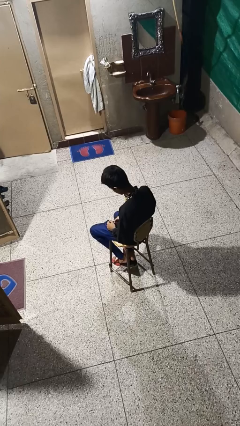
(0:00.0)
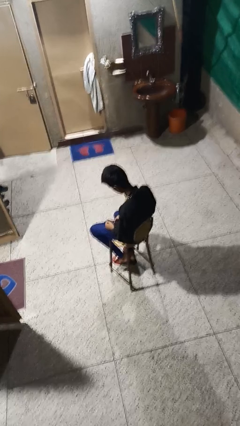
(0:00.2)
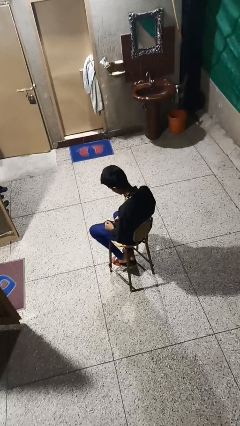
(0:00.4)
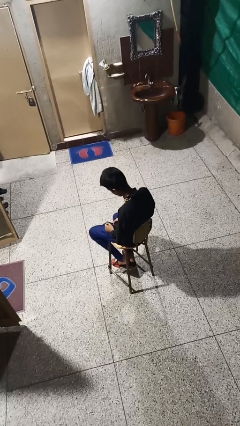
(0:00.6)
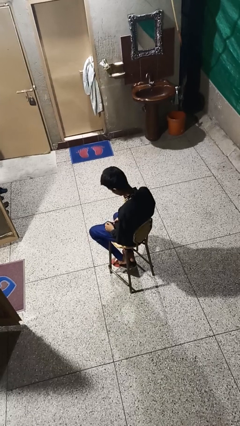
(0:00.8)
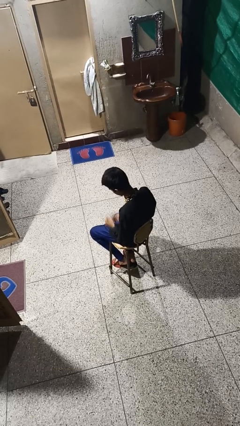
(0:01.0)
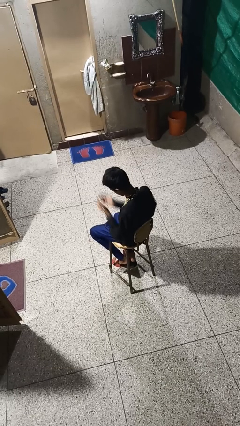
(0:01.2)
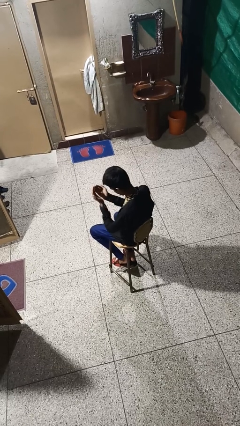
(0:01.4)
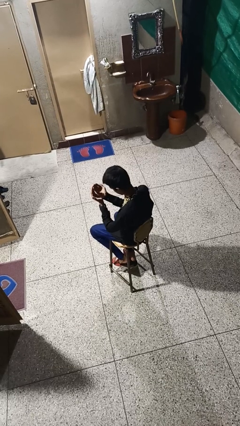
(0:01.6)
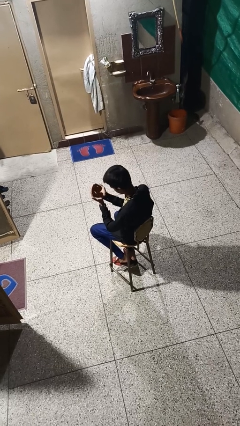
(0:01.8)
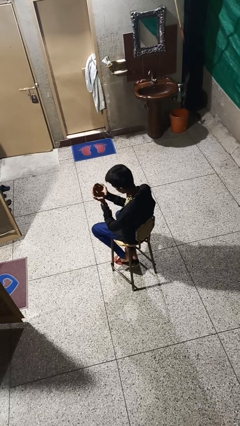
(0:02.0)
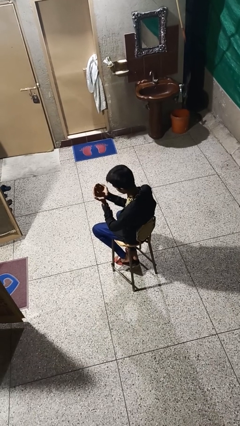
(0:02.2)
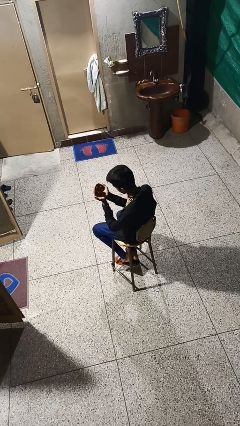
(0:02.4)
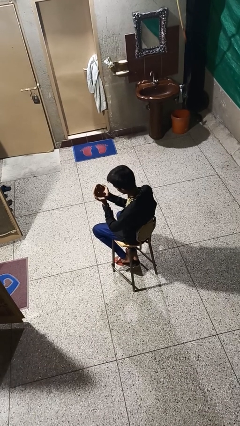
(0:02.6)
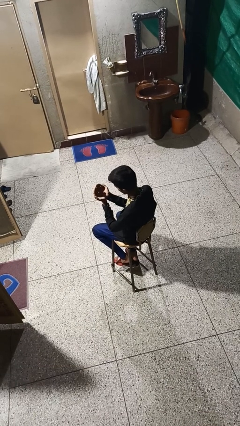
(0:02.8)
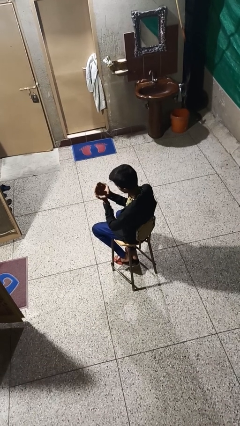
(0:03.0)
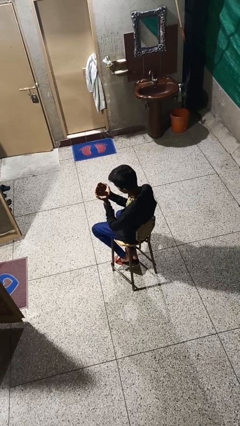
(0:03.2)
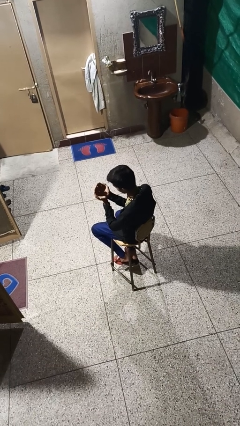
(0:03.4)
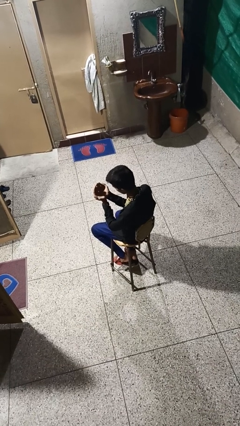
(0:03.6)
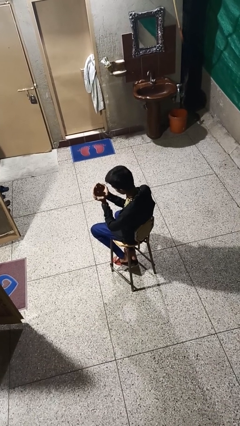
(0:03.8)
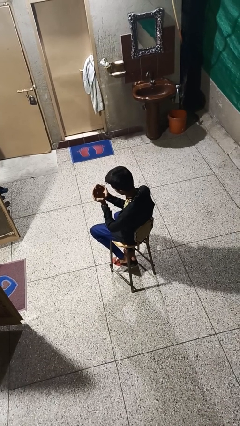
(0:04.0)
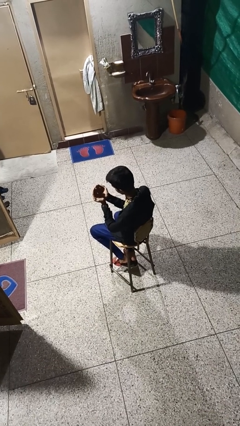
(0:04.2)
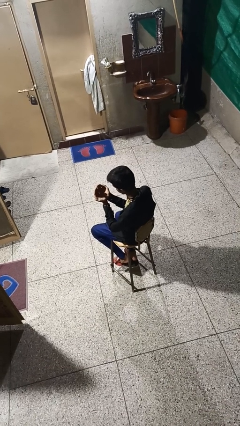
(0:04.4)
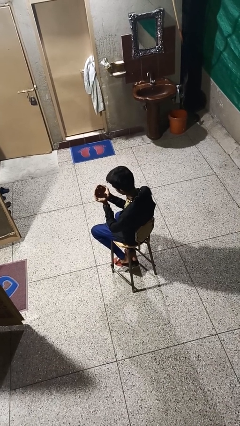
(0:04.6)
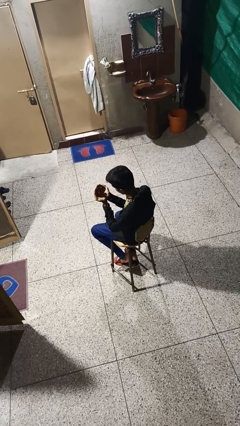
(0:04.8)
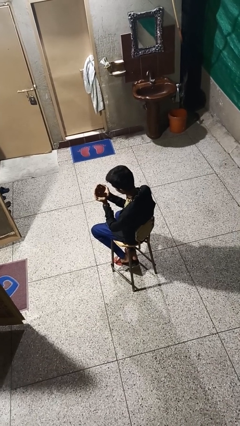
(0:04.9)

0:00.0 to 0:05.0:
person prays

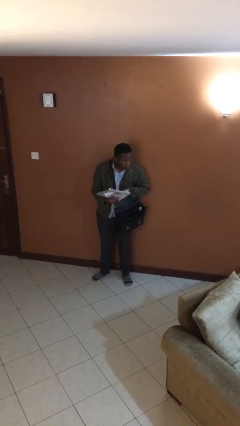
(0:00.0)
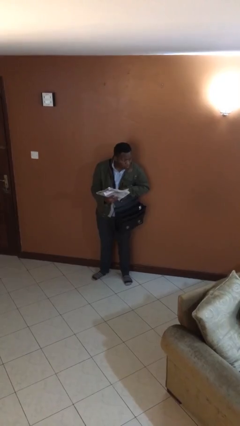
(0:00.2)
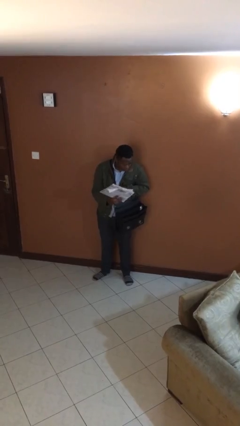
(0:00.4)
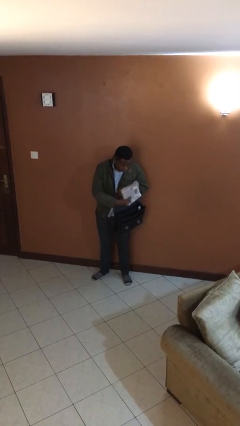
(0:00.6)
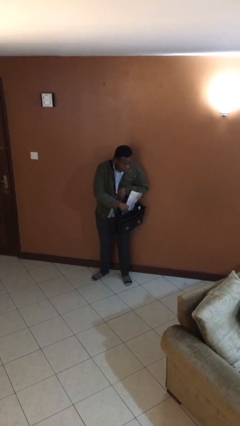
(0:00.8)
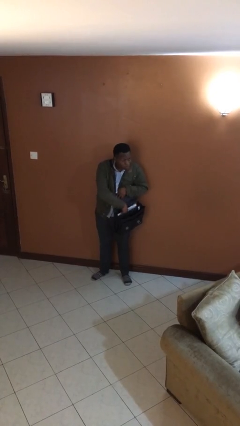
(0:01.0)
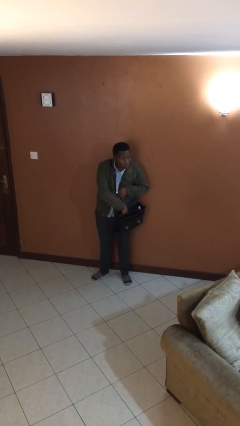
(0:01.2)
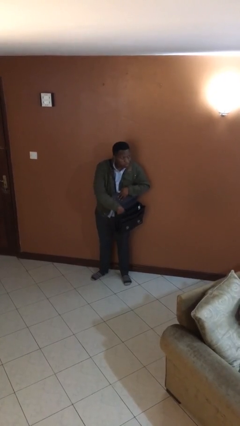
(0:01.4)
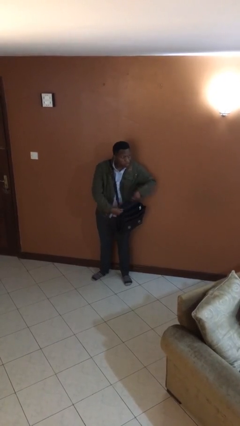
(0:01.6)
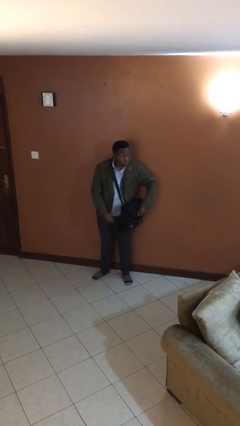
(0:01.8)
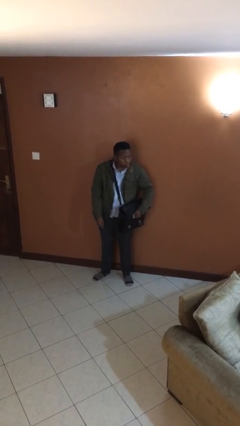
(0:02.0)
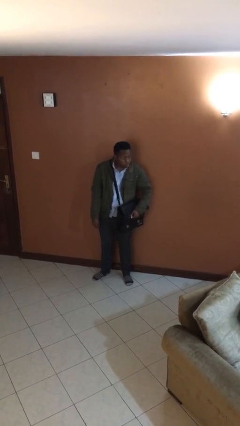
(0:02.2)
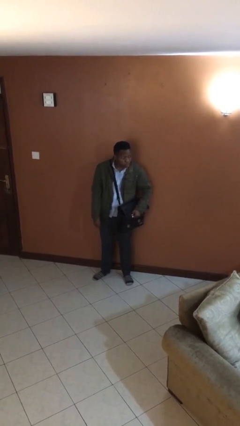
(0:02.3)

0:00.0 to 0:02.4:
person puts object into purse

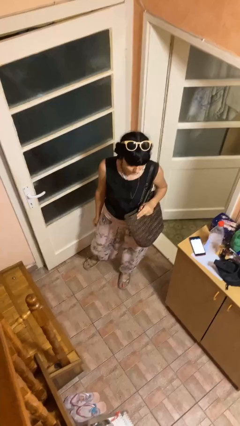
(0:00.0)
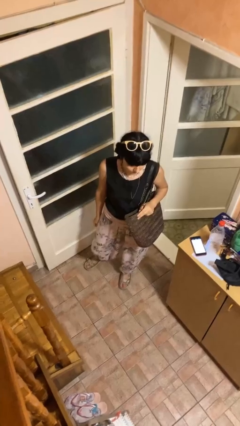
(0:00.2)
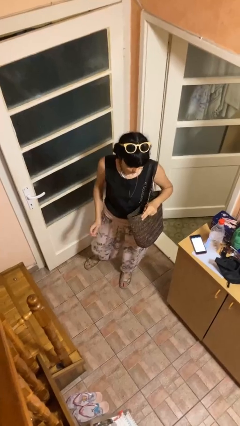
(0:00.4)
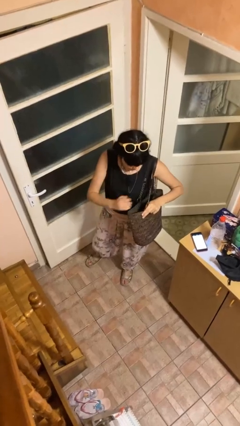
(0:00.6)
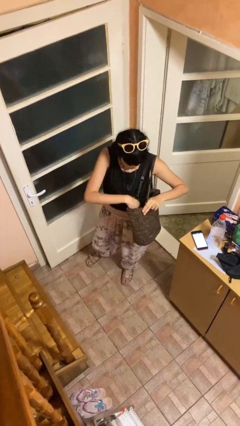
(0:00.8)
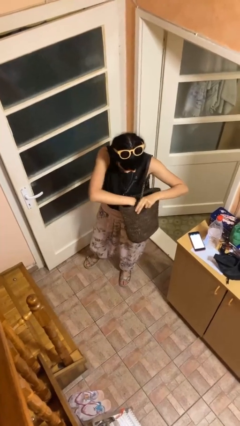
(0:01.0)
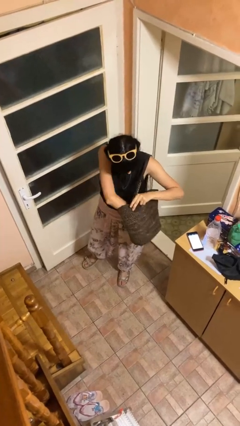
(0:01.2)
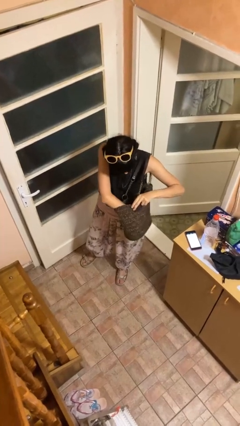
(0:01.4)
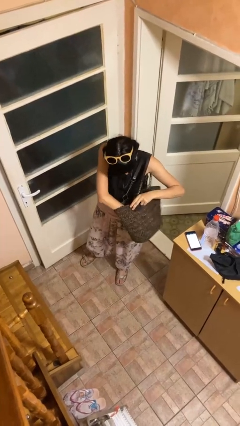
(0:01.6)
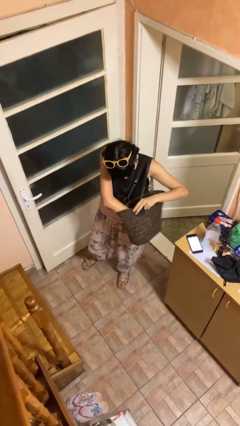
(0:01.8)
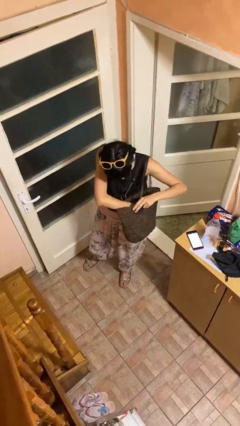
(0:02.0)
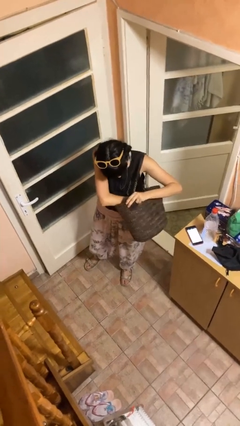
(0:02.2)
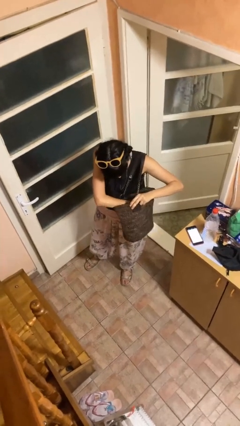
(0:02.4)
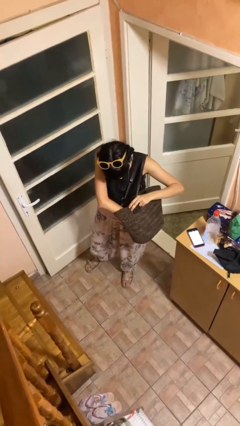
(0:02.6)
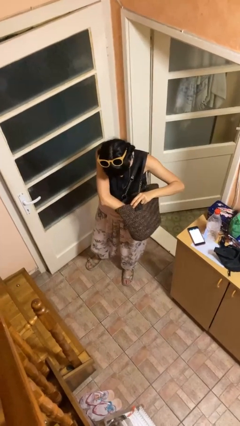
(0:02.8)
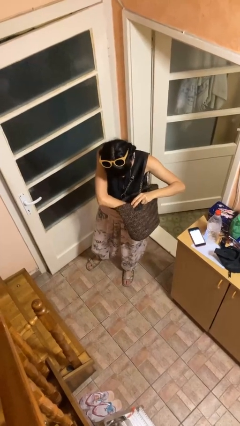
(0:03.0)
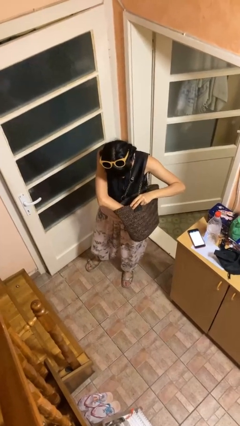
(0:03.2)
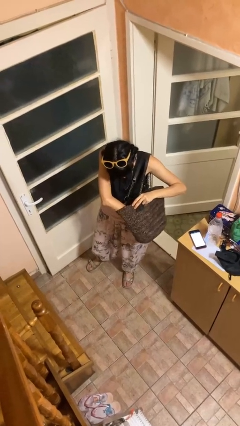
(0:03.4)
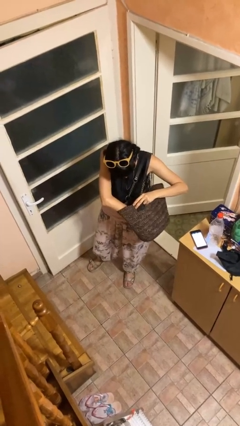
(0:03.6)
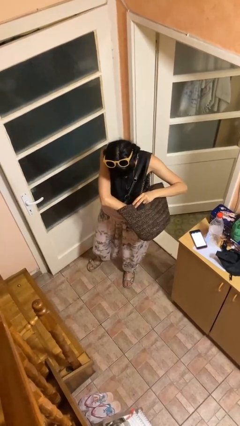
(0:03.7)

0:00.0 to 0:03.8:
person searches in purse

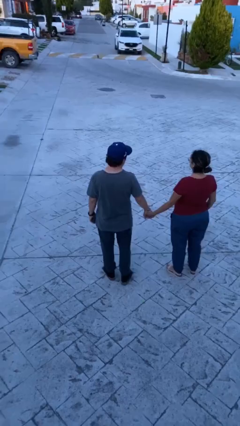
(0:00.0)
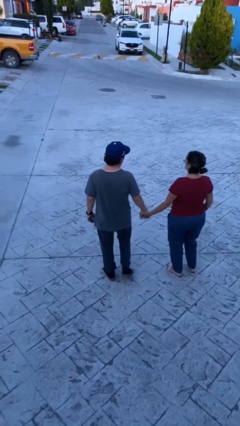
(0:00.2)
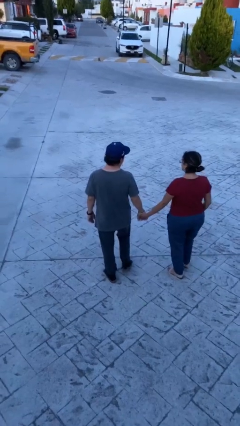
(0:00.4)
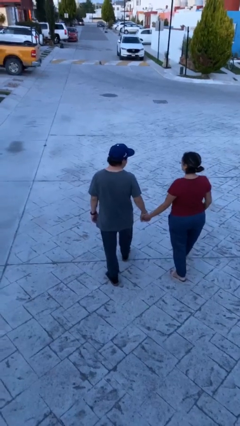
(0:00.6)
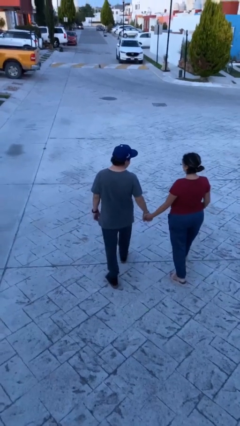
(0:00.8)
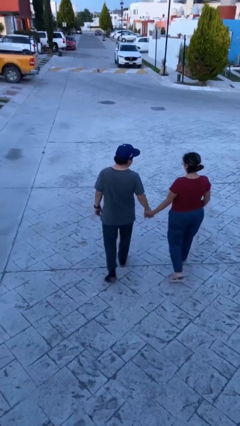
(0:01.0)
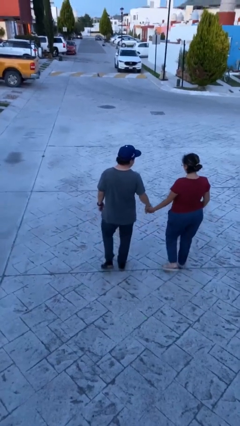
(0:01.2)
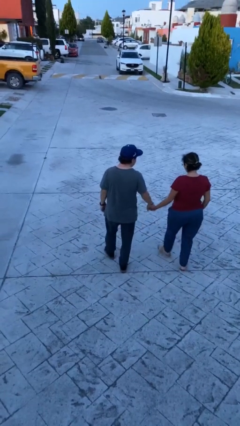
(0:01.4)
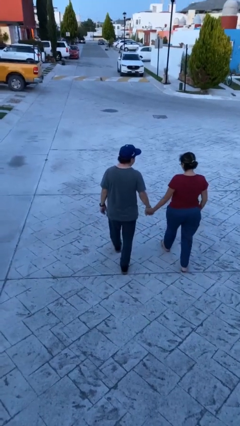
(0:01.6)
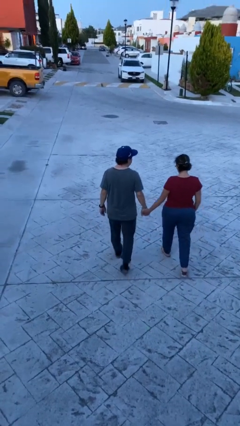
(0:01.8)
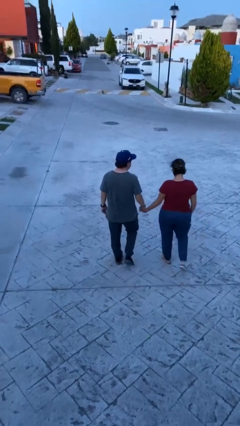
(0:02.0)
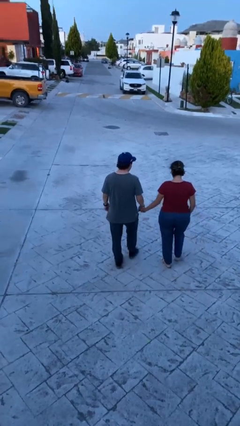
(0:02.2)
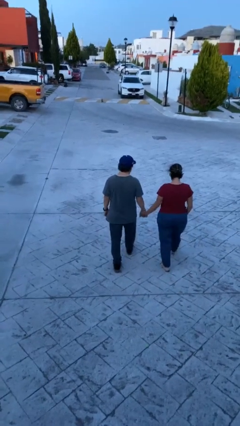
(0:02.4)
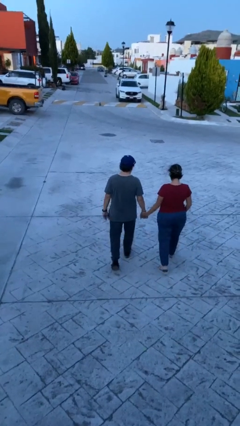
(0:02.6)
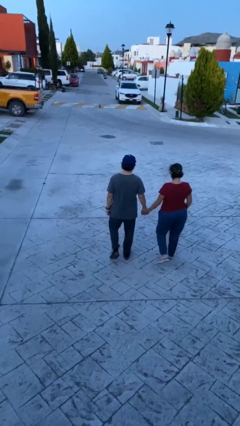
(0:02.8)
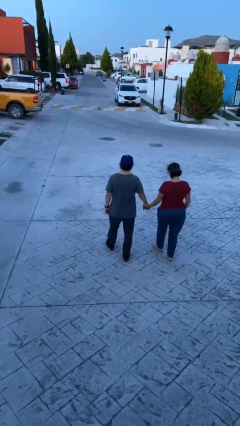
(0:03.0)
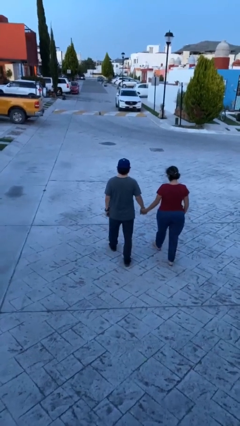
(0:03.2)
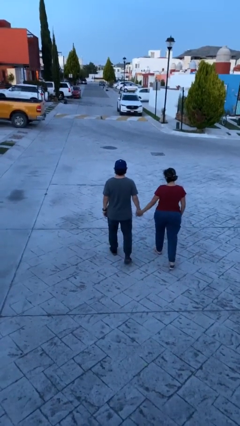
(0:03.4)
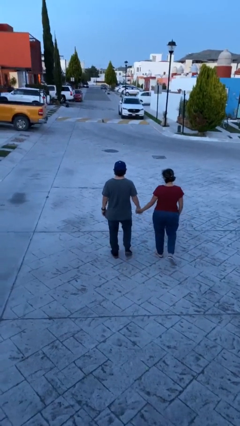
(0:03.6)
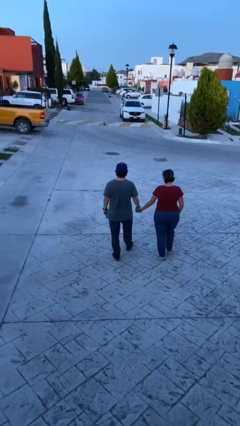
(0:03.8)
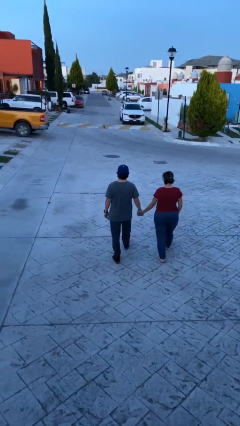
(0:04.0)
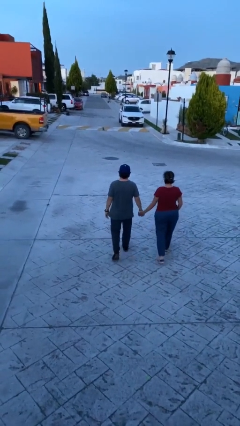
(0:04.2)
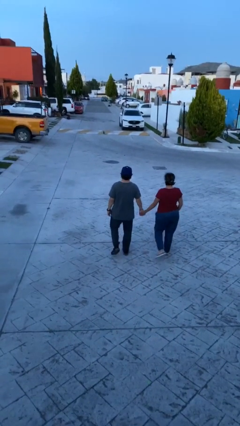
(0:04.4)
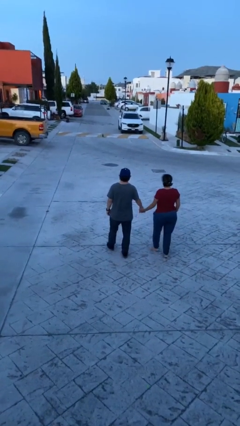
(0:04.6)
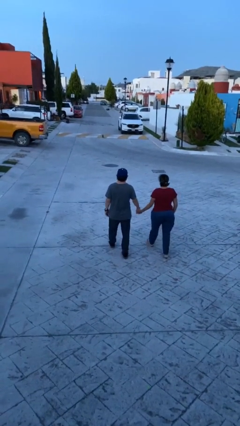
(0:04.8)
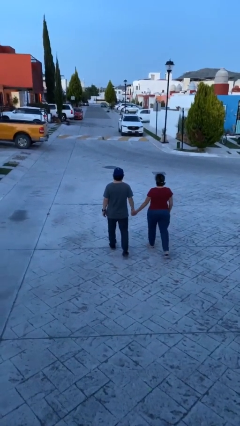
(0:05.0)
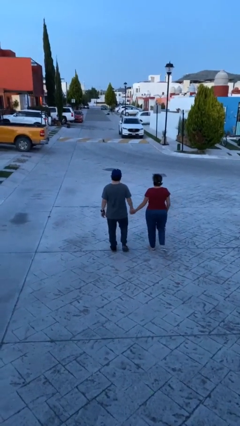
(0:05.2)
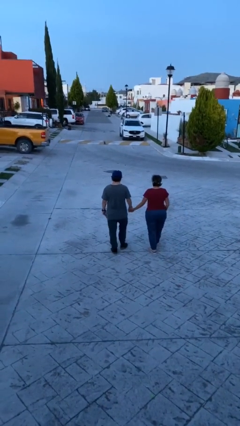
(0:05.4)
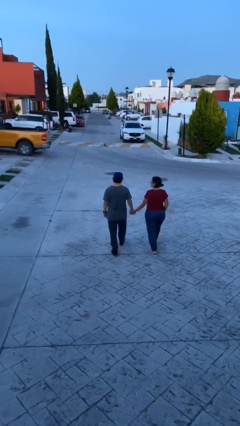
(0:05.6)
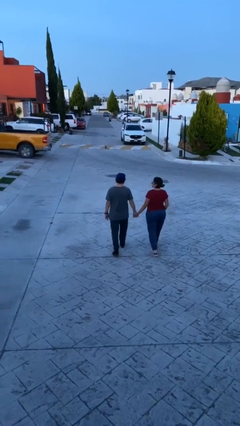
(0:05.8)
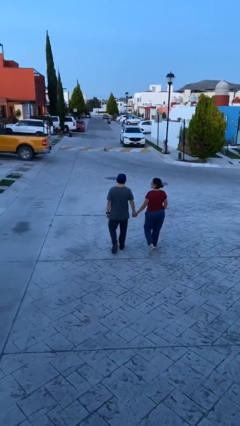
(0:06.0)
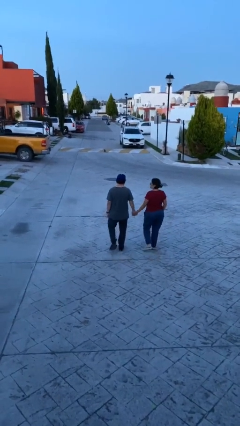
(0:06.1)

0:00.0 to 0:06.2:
person holds hand

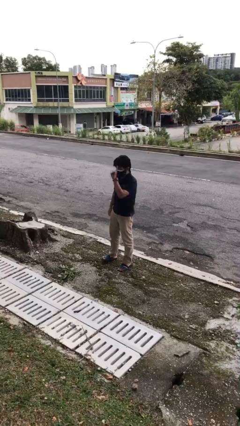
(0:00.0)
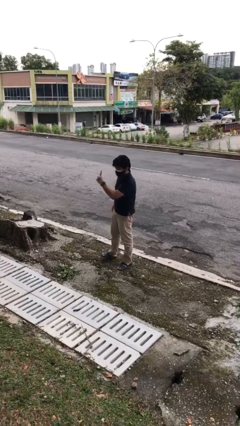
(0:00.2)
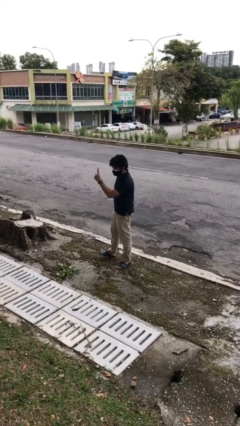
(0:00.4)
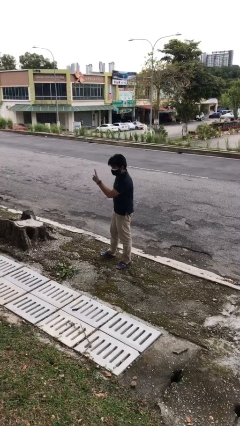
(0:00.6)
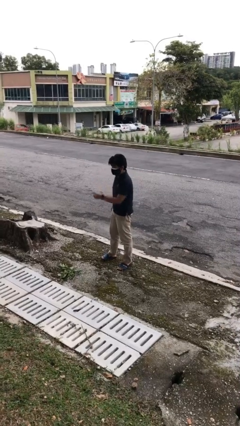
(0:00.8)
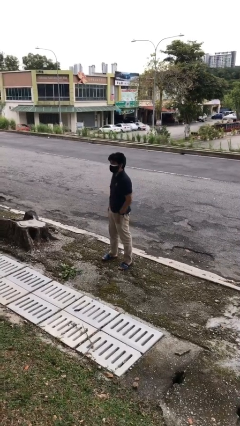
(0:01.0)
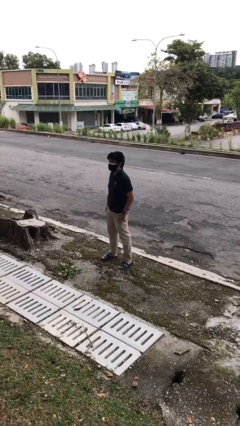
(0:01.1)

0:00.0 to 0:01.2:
person gestures number one
